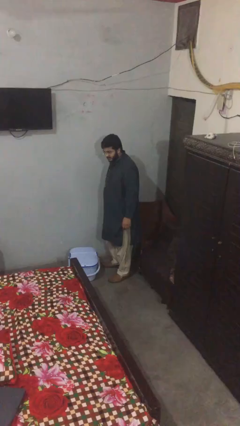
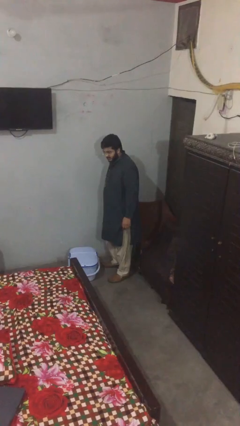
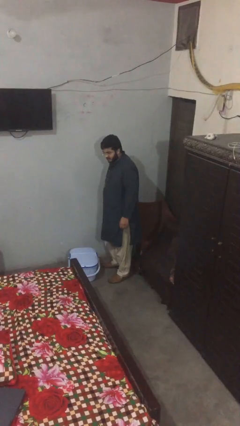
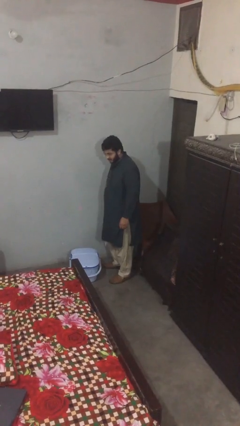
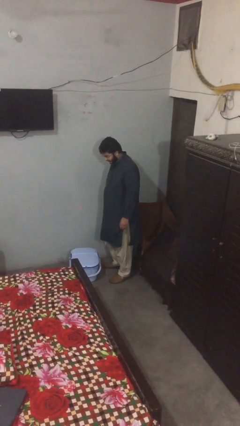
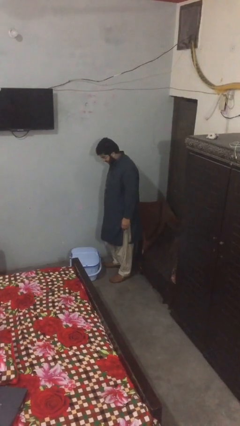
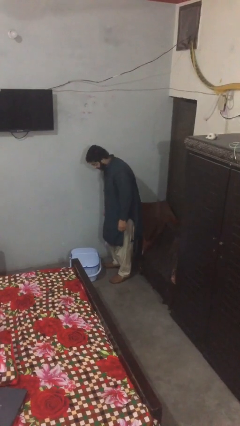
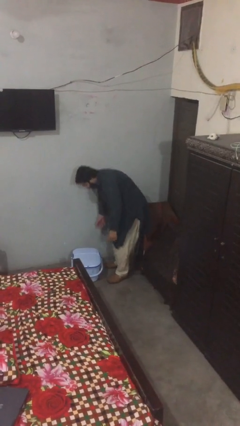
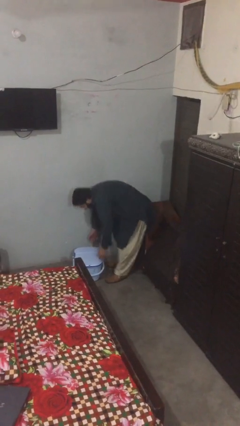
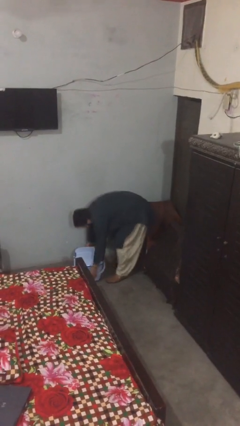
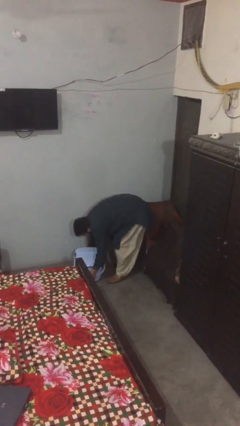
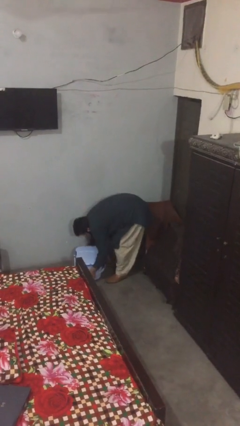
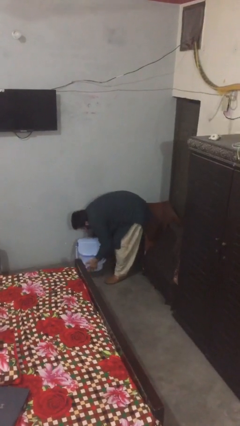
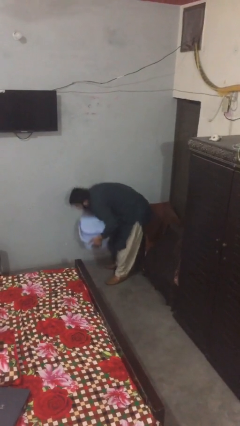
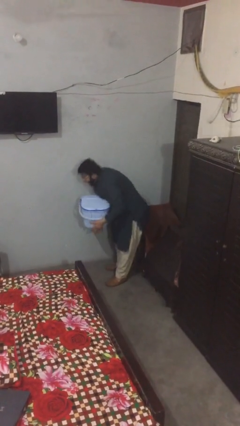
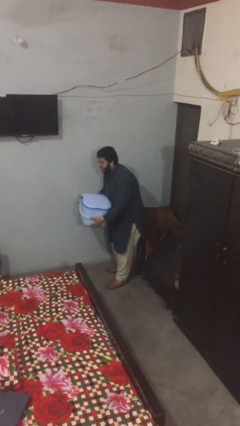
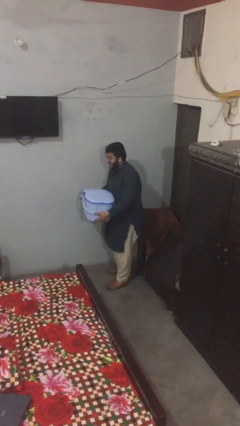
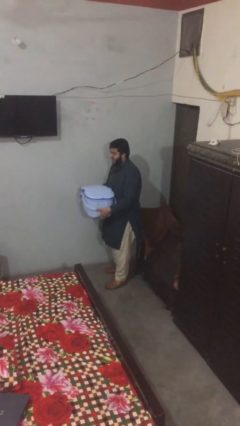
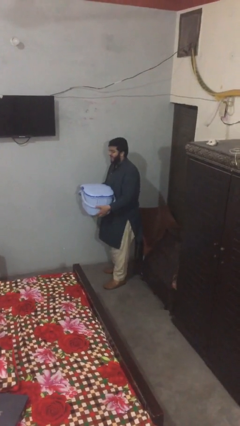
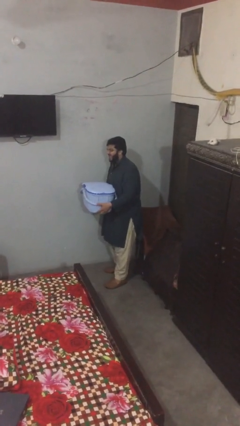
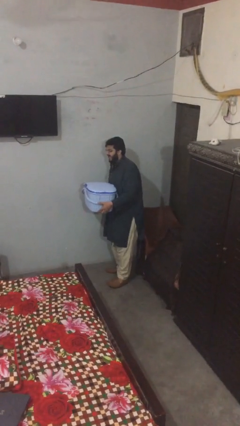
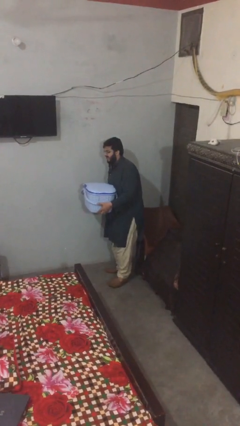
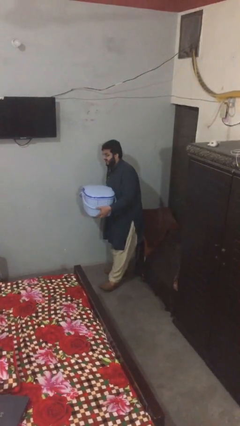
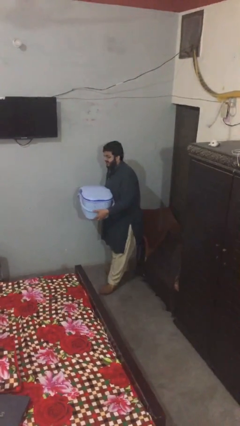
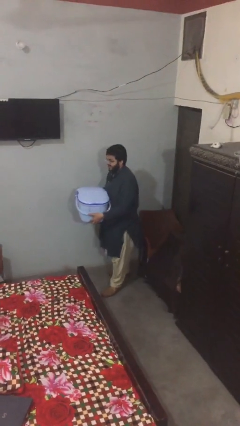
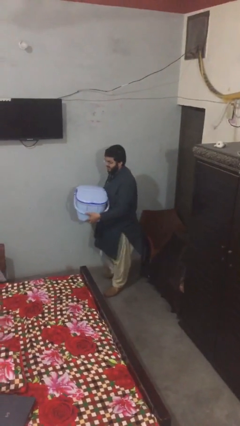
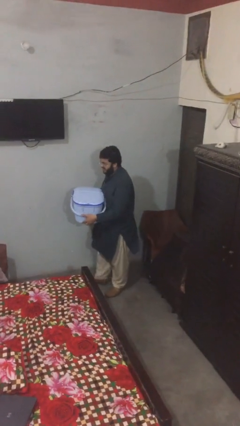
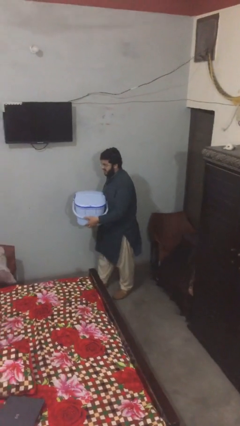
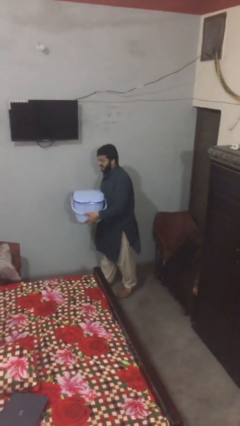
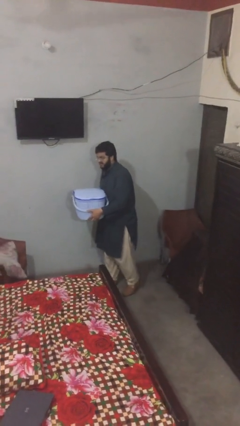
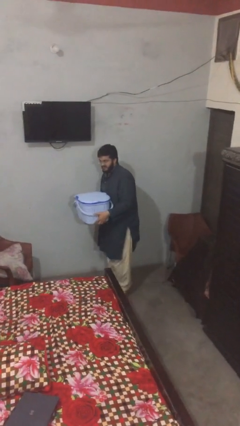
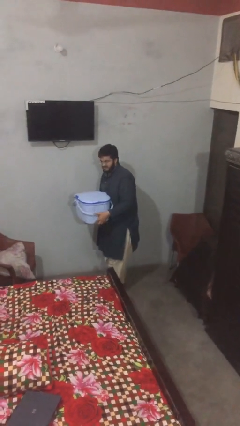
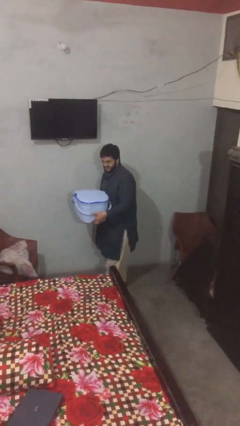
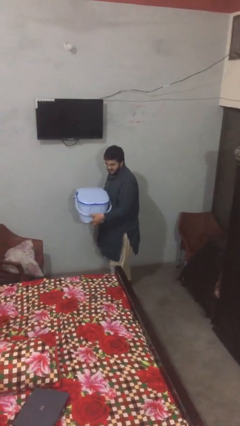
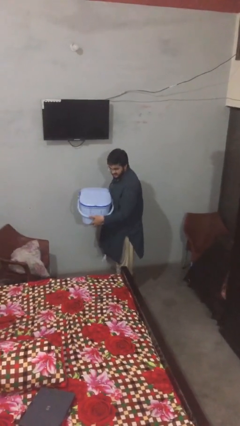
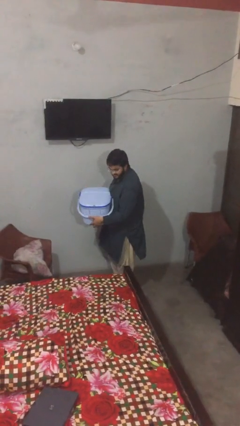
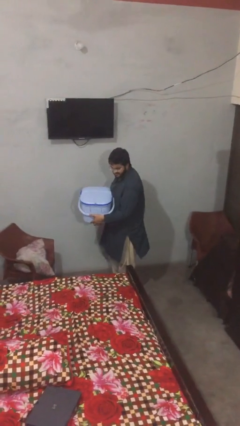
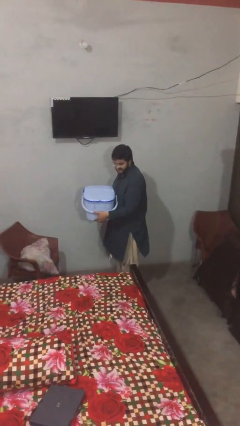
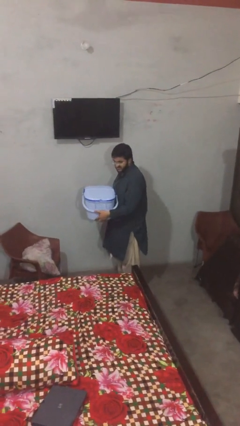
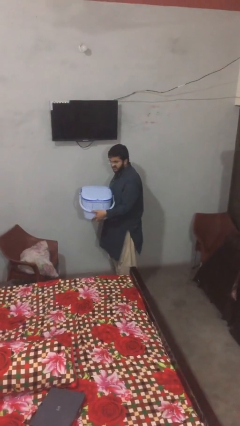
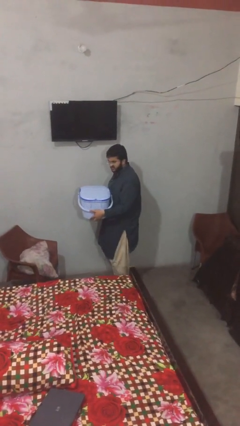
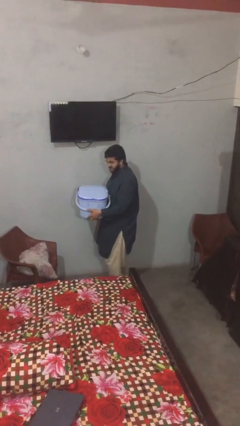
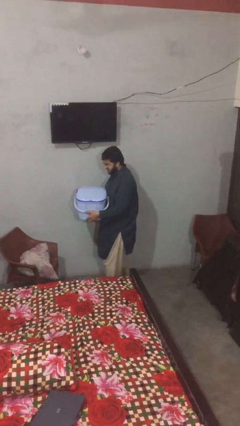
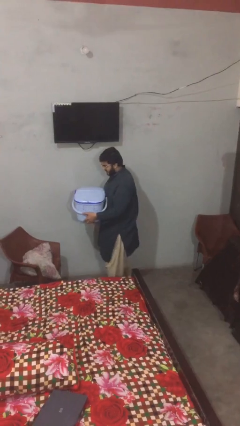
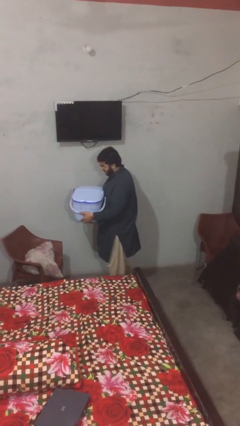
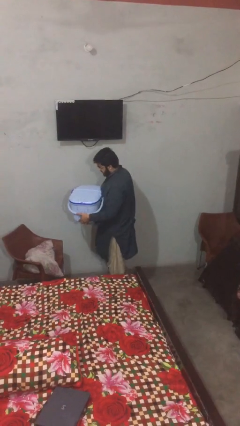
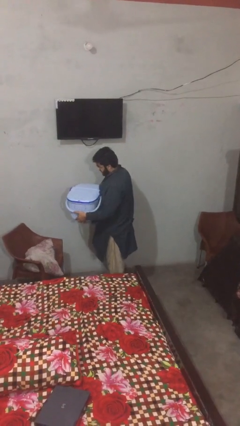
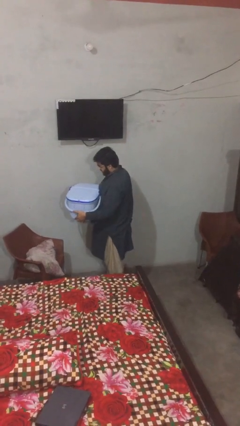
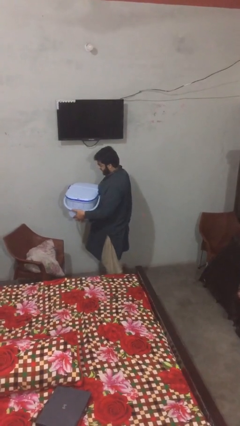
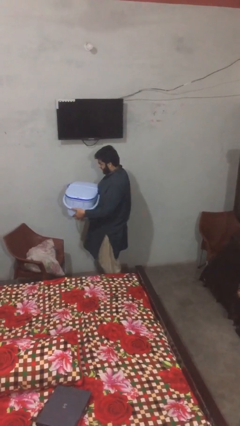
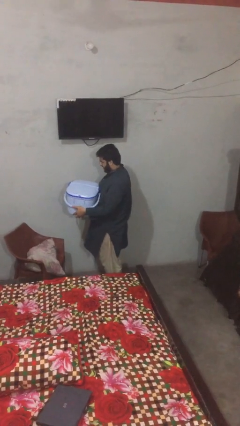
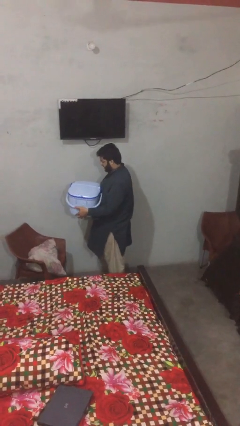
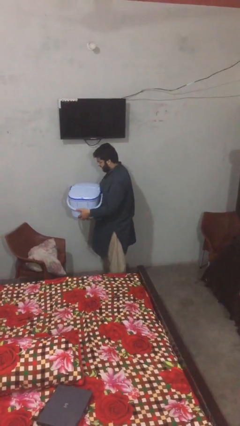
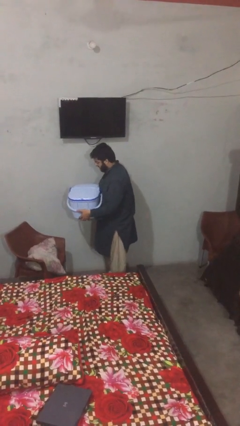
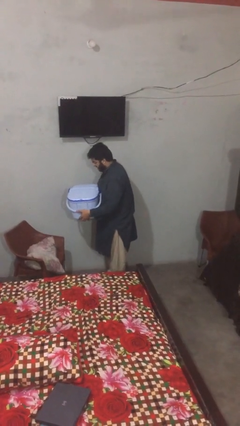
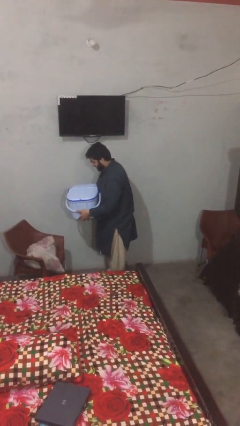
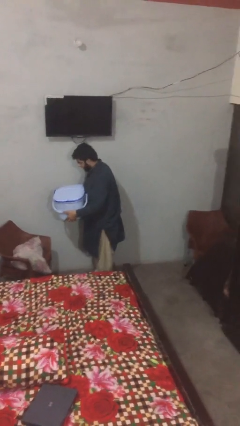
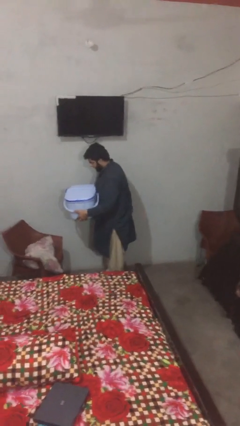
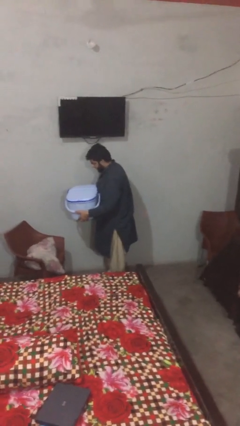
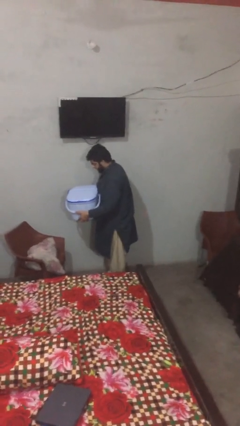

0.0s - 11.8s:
person carries heavy object

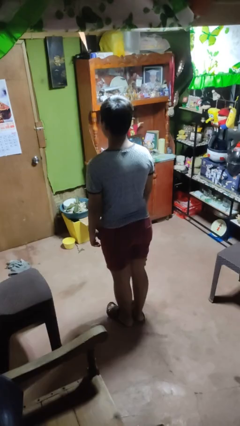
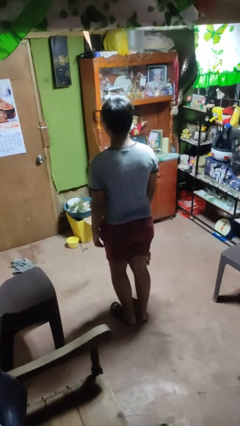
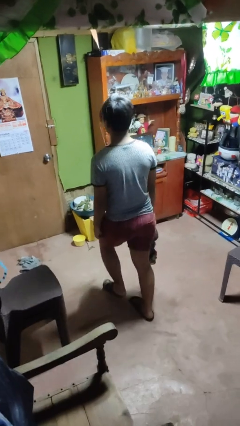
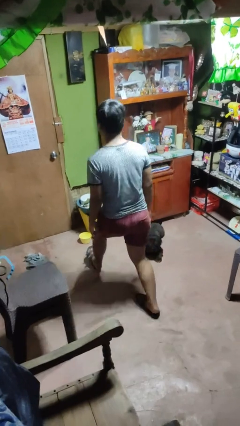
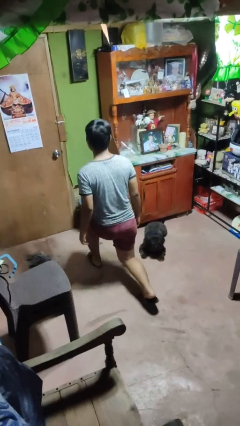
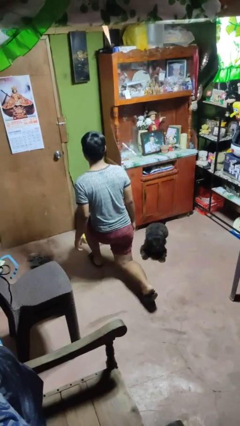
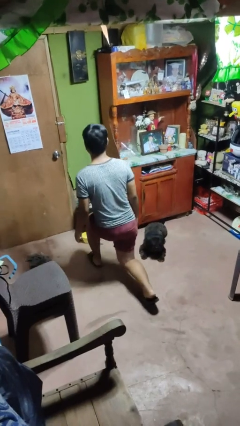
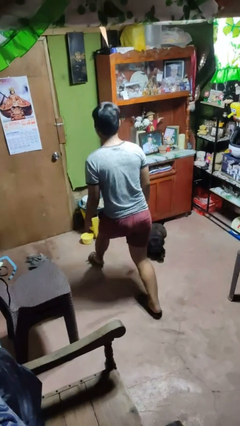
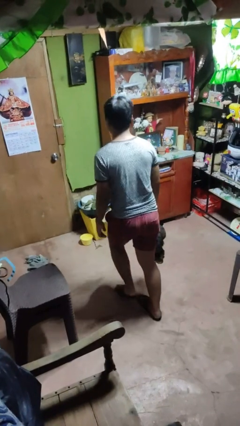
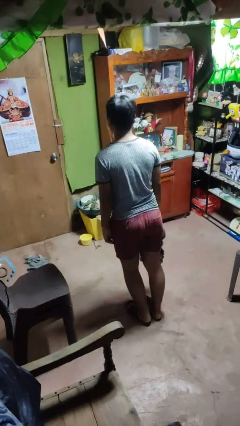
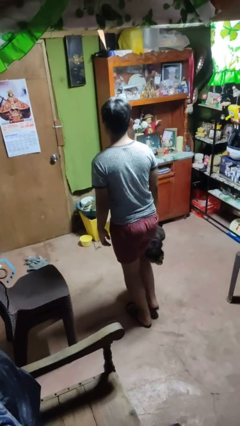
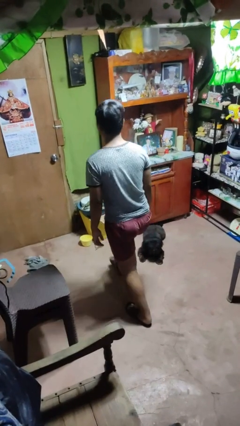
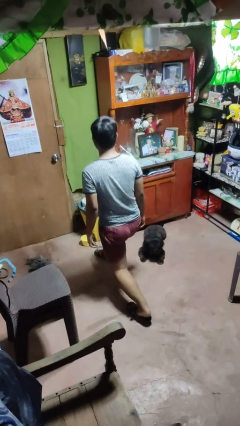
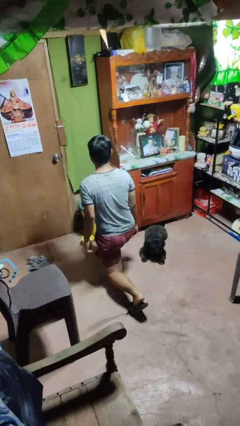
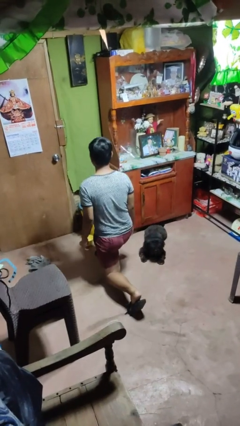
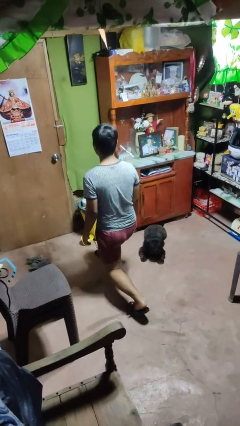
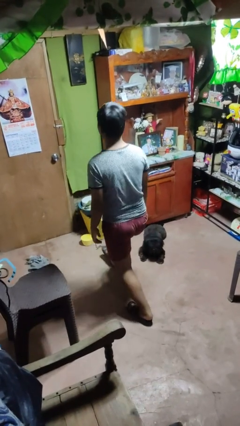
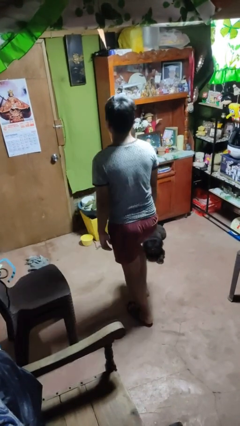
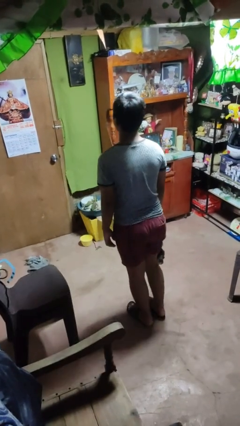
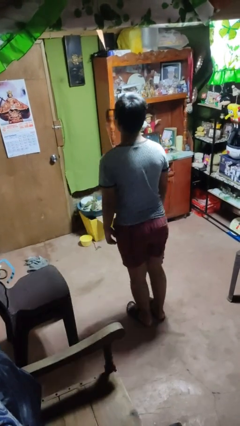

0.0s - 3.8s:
person exercises with lunges

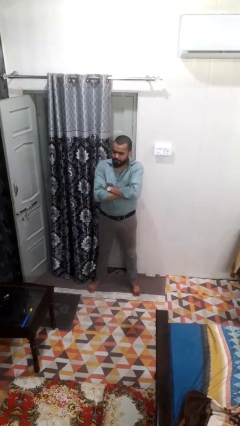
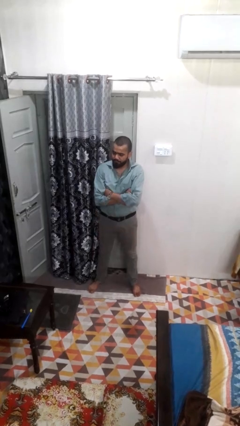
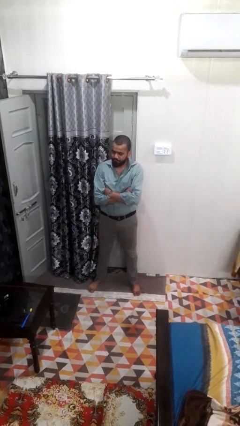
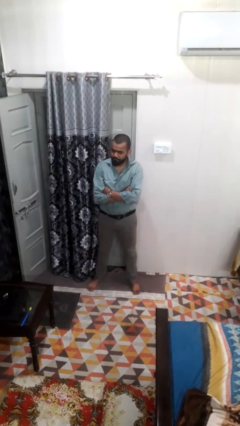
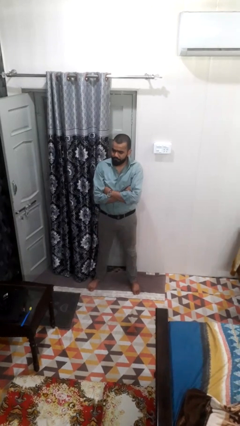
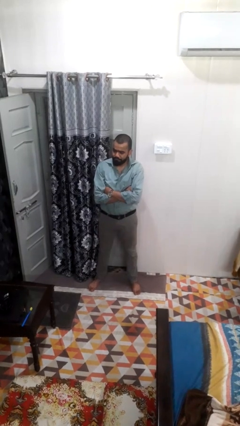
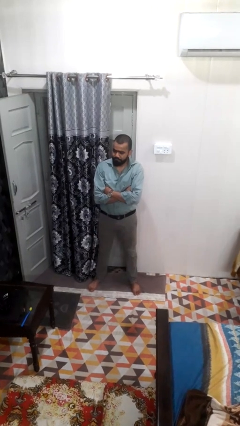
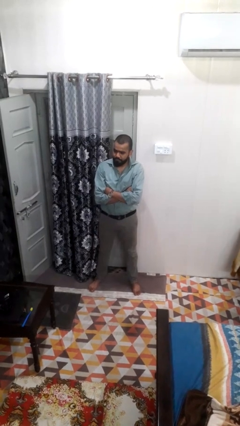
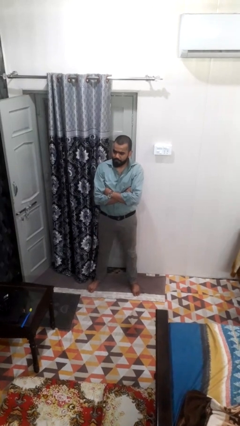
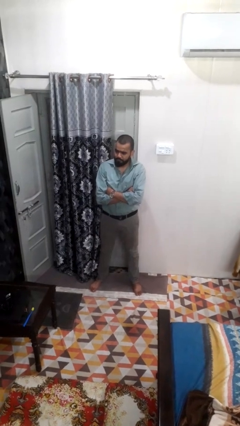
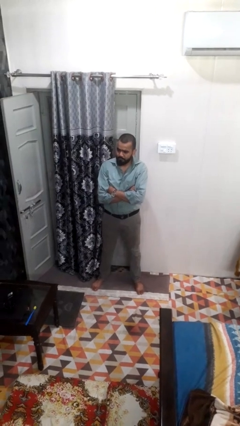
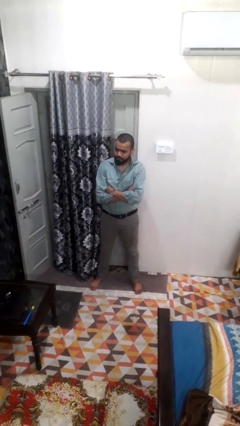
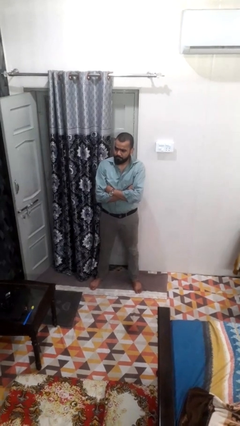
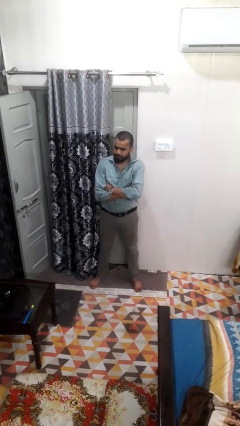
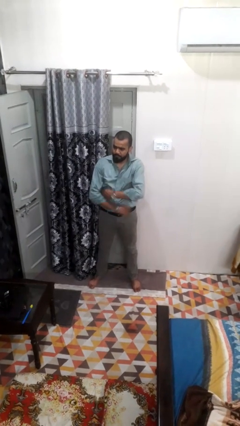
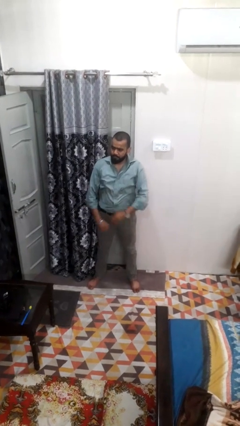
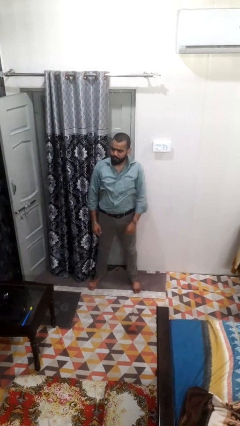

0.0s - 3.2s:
person crosses arms
